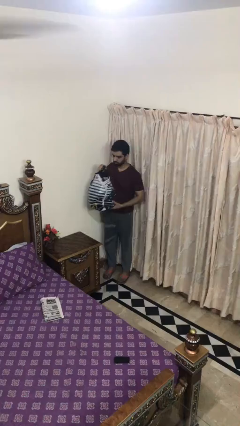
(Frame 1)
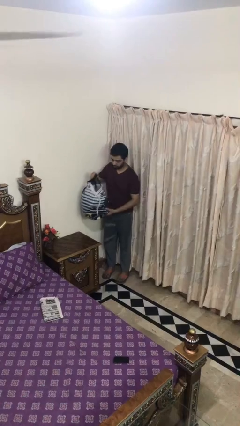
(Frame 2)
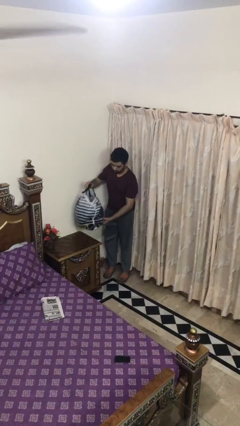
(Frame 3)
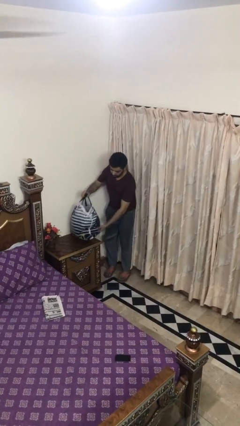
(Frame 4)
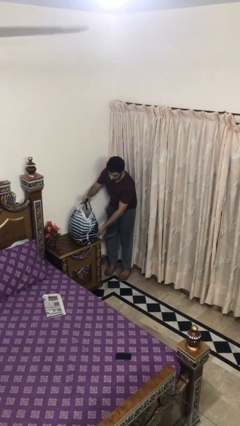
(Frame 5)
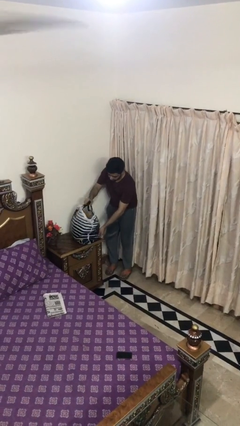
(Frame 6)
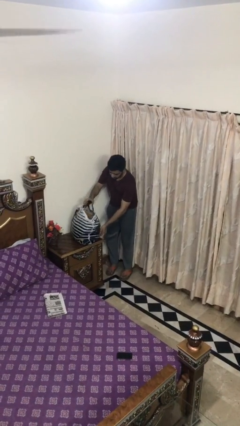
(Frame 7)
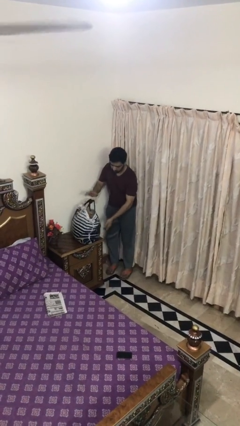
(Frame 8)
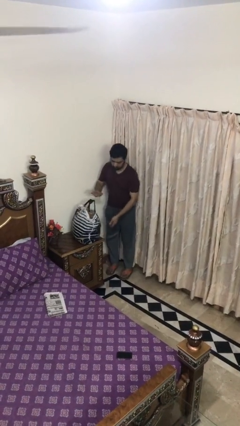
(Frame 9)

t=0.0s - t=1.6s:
person puts down object on table

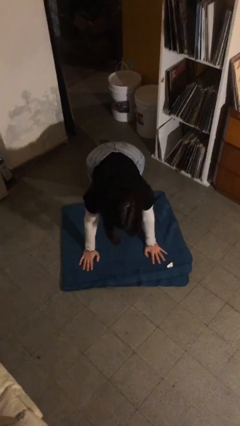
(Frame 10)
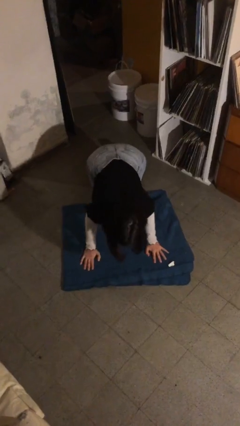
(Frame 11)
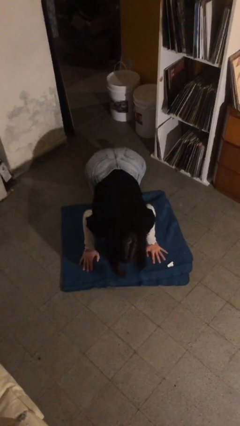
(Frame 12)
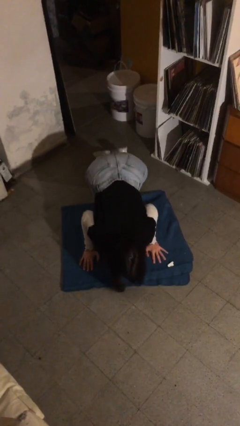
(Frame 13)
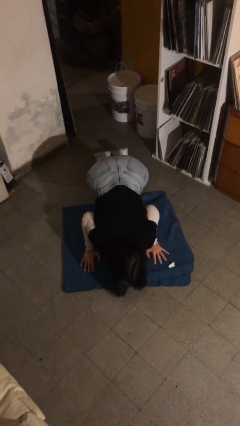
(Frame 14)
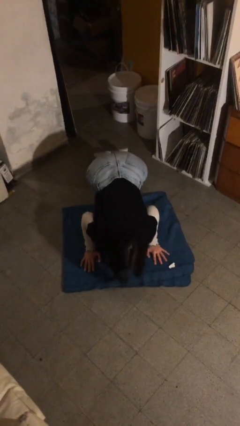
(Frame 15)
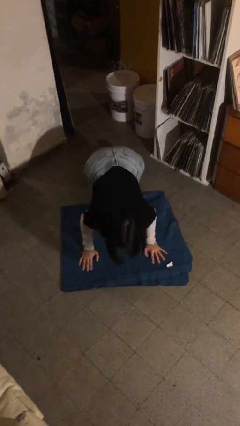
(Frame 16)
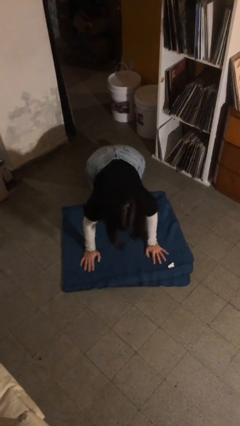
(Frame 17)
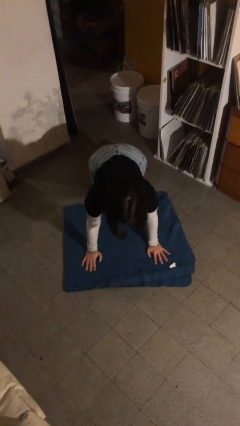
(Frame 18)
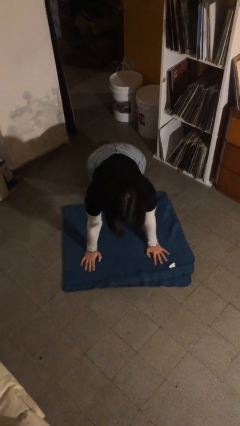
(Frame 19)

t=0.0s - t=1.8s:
person exercises with pushup

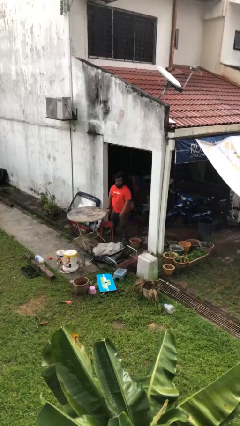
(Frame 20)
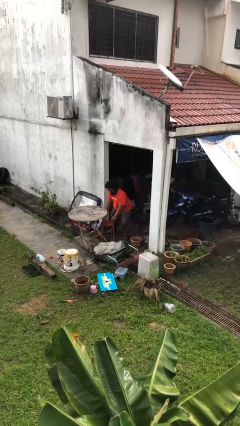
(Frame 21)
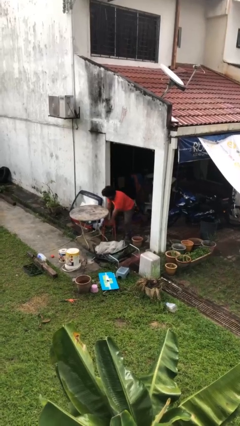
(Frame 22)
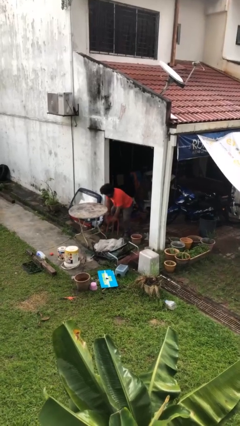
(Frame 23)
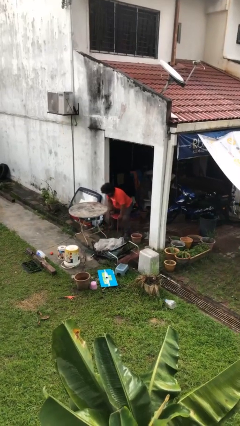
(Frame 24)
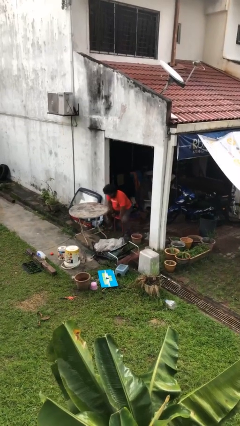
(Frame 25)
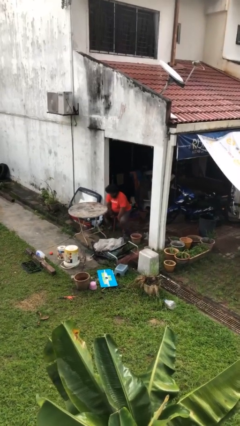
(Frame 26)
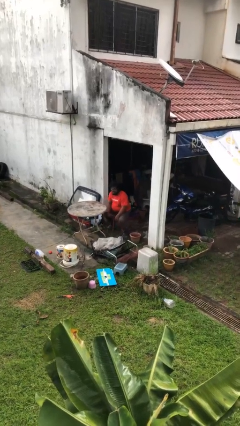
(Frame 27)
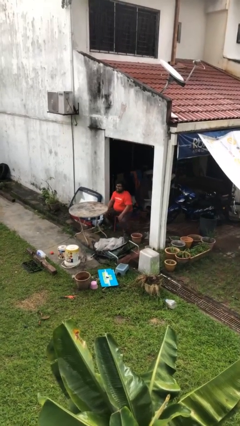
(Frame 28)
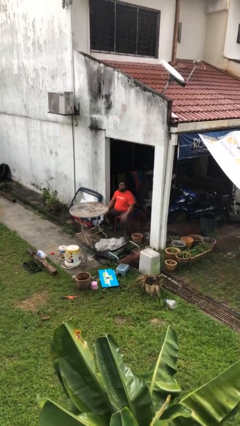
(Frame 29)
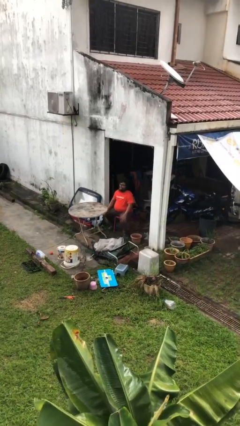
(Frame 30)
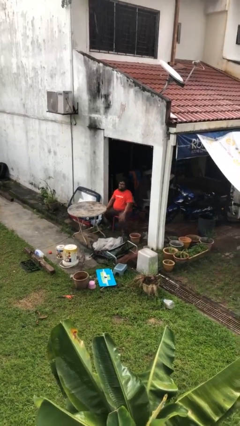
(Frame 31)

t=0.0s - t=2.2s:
person sits down

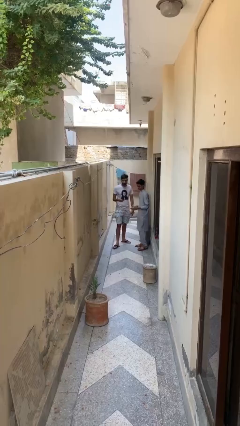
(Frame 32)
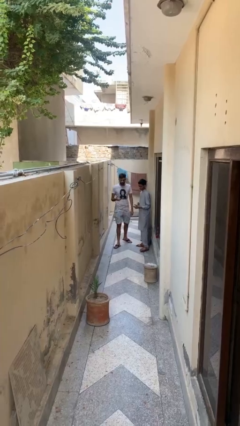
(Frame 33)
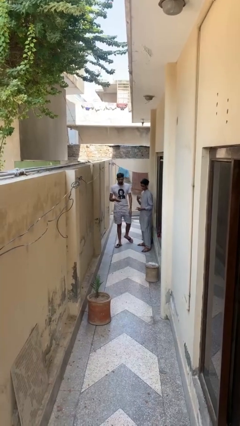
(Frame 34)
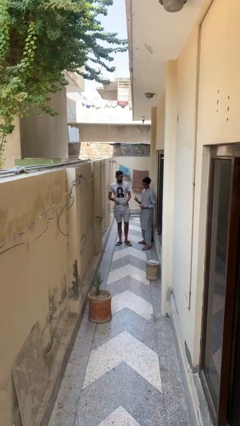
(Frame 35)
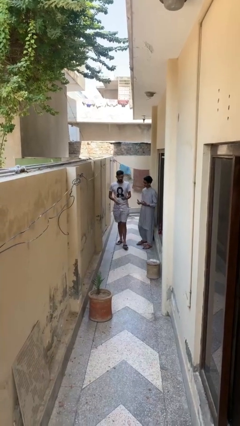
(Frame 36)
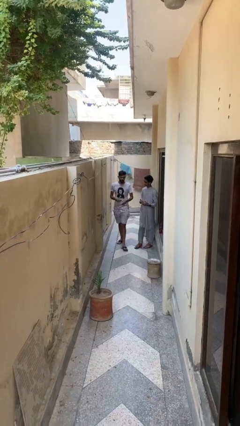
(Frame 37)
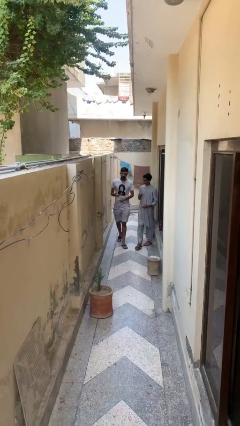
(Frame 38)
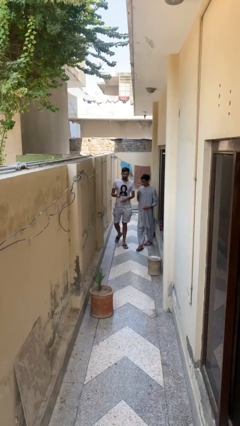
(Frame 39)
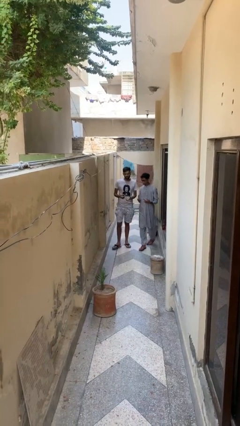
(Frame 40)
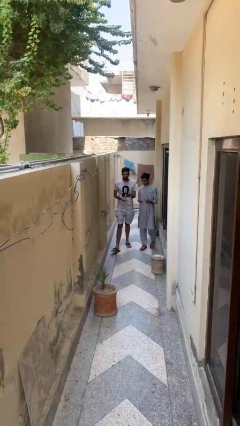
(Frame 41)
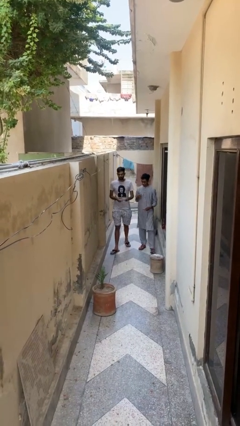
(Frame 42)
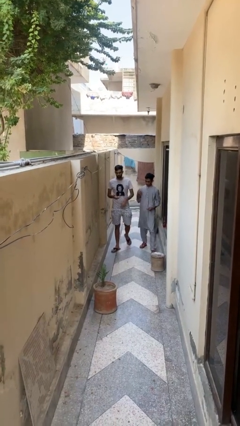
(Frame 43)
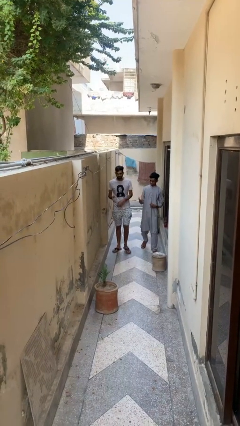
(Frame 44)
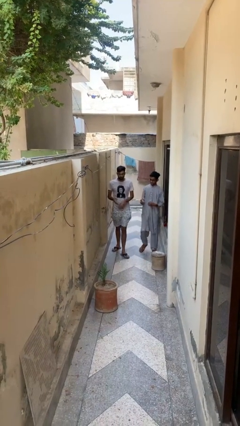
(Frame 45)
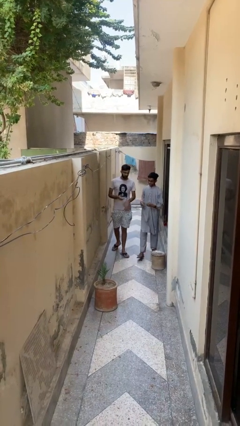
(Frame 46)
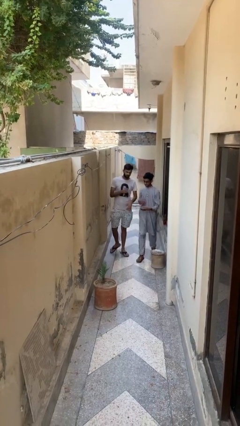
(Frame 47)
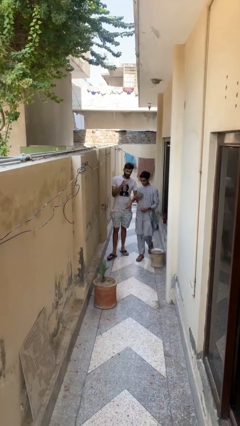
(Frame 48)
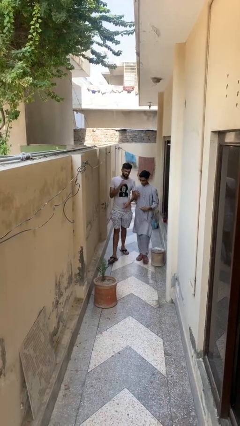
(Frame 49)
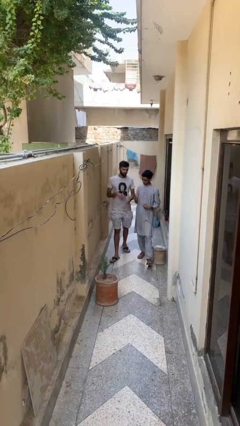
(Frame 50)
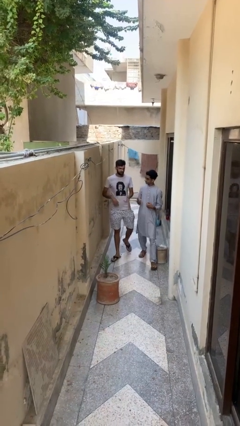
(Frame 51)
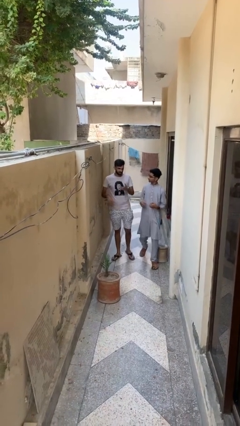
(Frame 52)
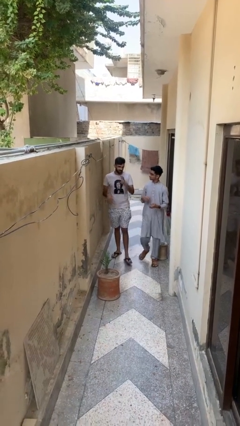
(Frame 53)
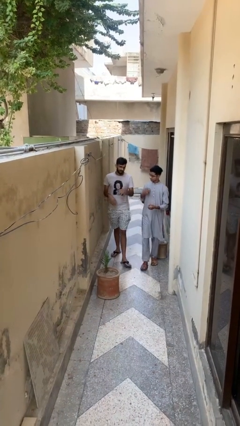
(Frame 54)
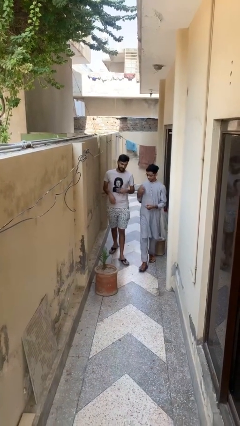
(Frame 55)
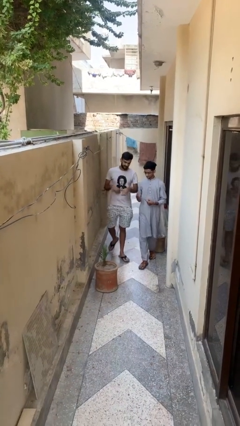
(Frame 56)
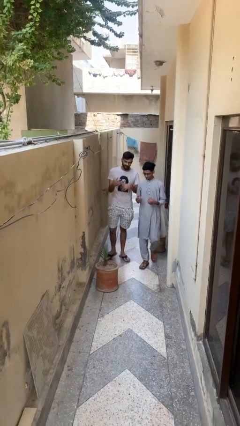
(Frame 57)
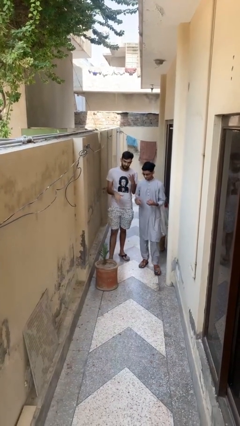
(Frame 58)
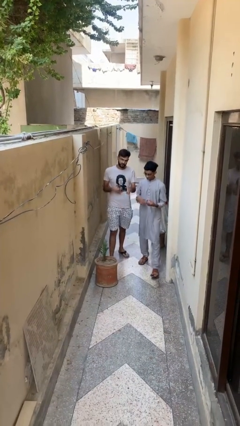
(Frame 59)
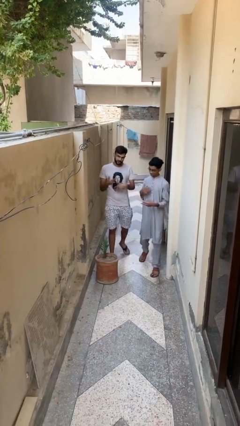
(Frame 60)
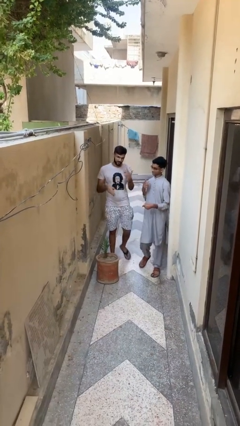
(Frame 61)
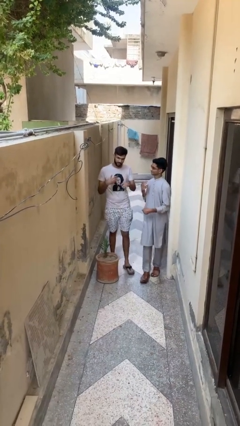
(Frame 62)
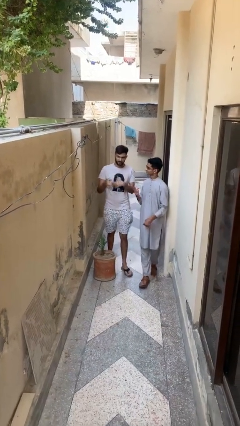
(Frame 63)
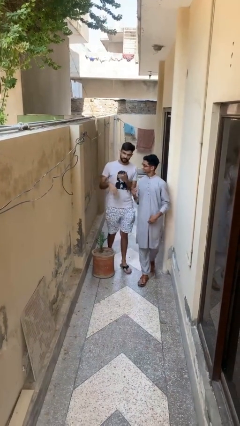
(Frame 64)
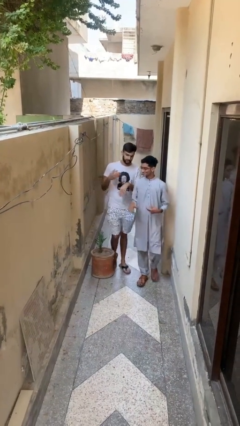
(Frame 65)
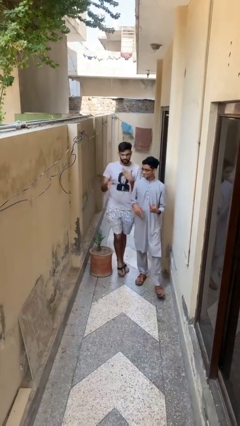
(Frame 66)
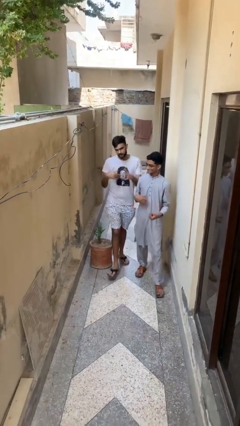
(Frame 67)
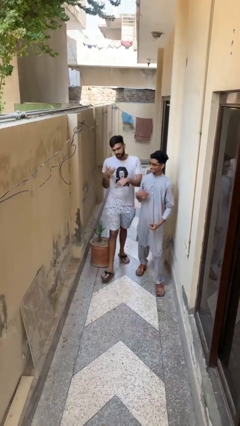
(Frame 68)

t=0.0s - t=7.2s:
person talks to person

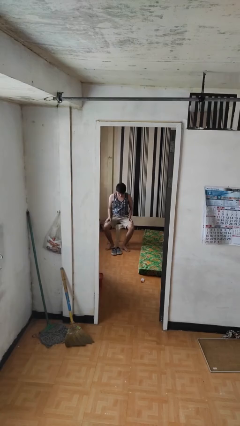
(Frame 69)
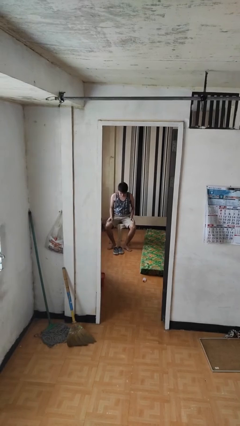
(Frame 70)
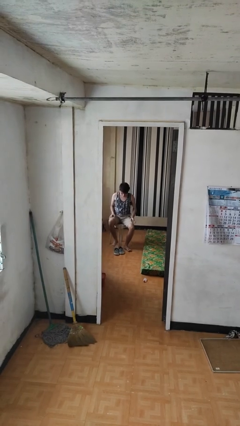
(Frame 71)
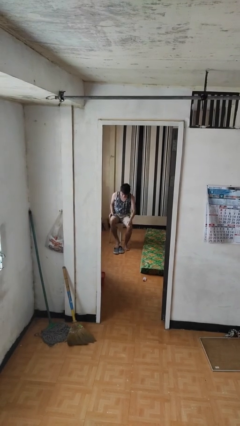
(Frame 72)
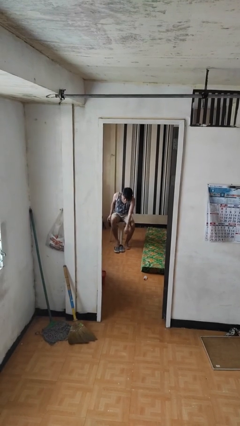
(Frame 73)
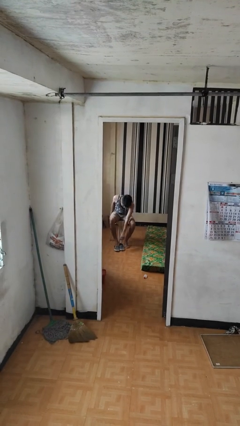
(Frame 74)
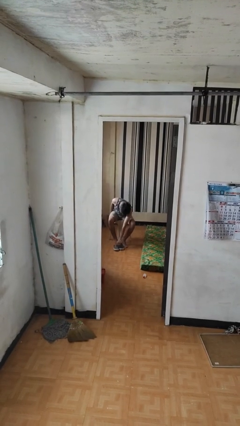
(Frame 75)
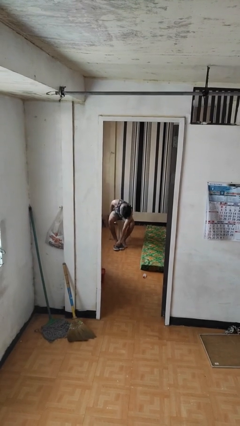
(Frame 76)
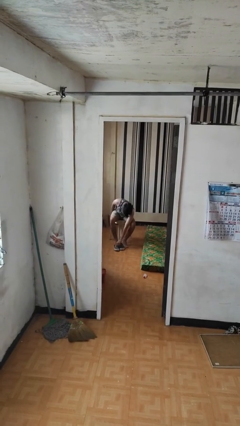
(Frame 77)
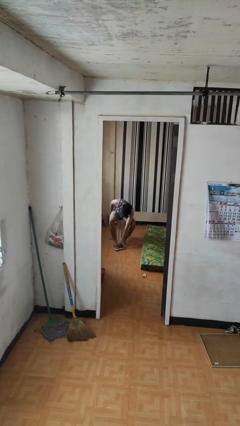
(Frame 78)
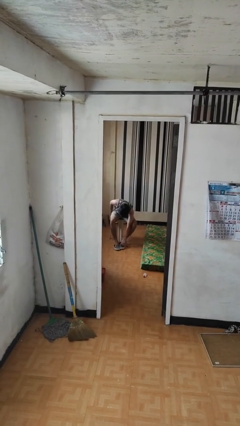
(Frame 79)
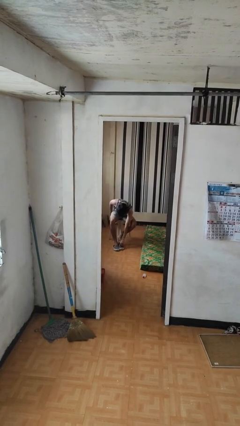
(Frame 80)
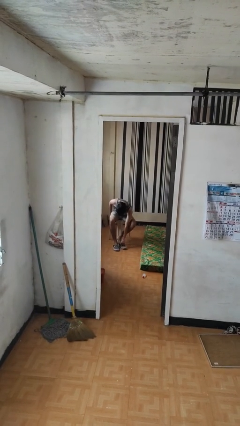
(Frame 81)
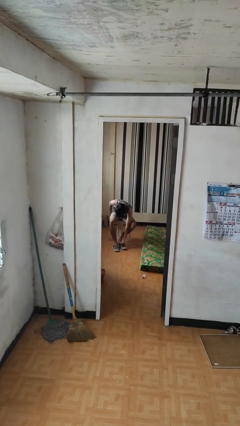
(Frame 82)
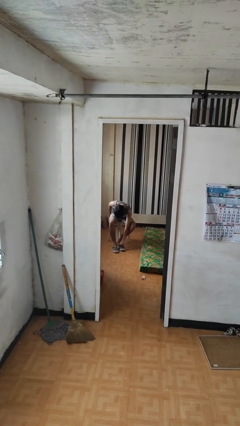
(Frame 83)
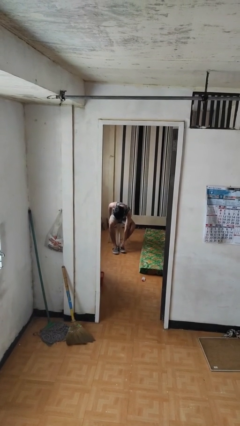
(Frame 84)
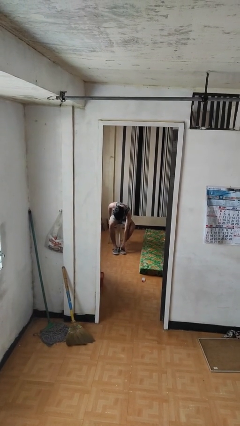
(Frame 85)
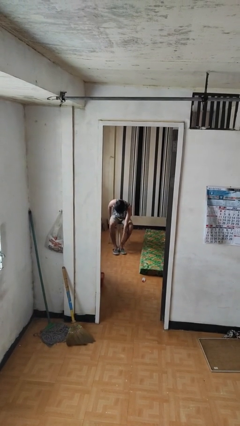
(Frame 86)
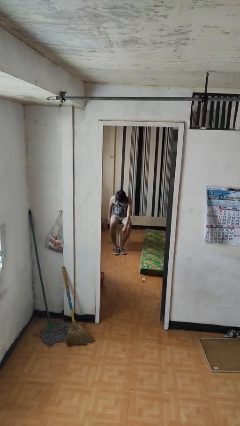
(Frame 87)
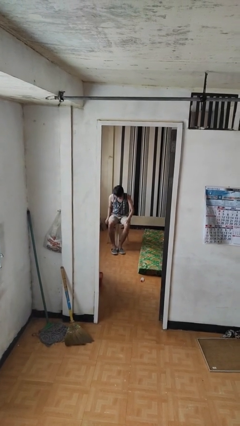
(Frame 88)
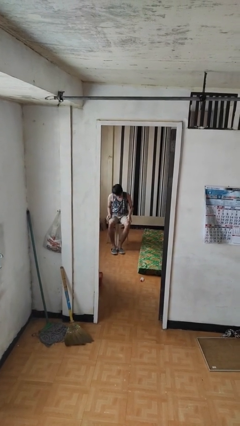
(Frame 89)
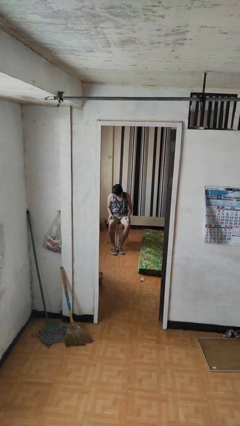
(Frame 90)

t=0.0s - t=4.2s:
person puts on shoes

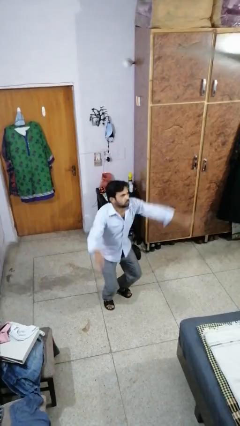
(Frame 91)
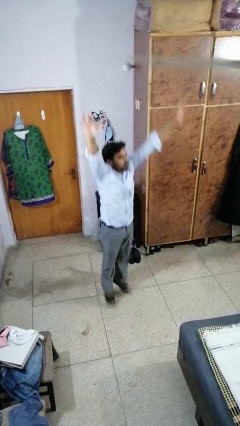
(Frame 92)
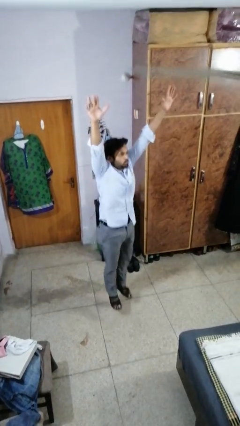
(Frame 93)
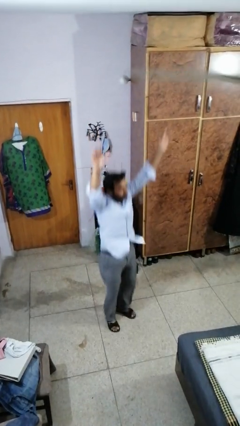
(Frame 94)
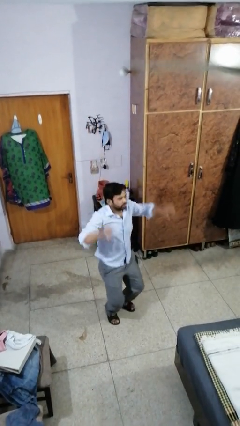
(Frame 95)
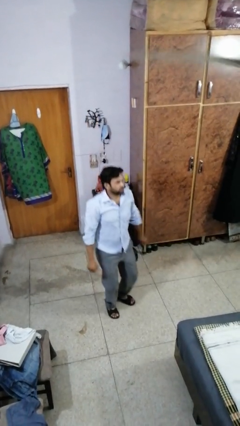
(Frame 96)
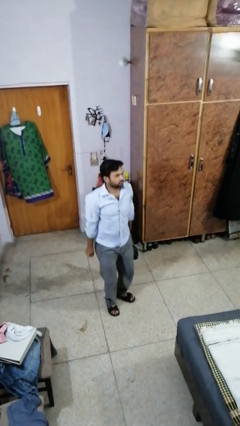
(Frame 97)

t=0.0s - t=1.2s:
person jumps
